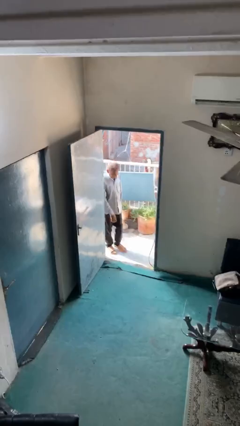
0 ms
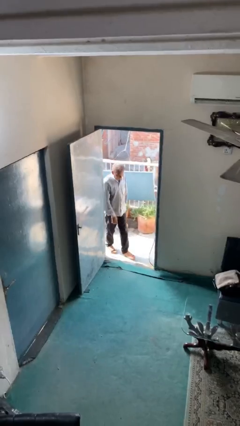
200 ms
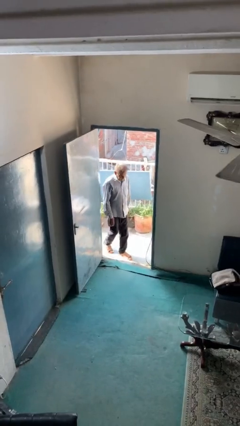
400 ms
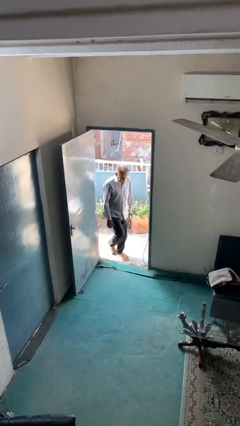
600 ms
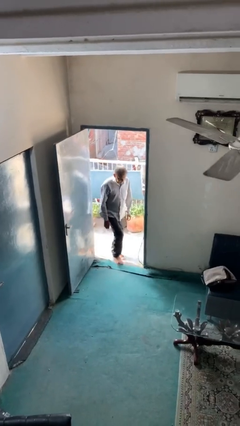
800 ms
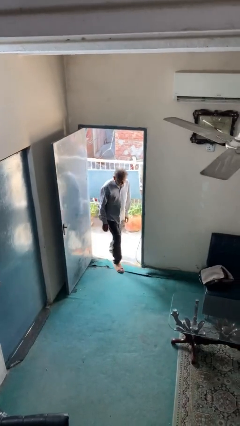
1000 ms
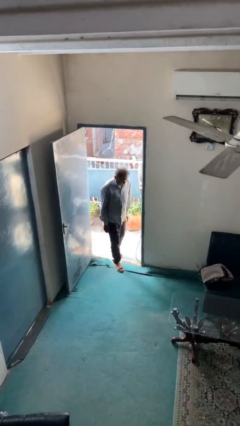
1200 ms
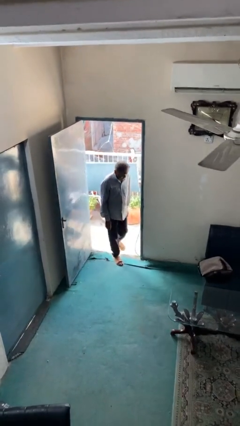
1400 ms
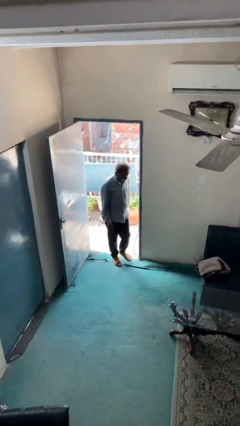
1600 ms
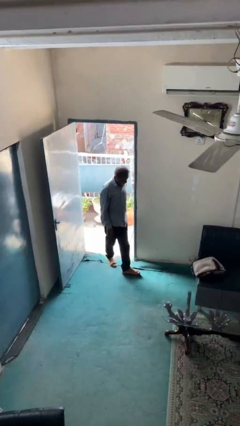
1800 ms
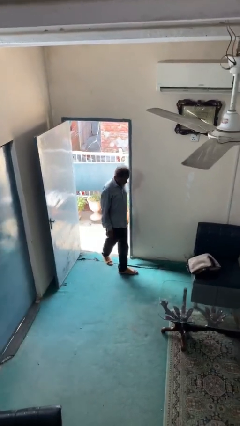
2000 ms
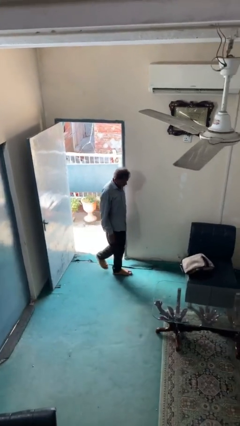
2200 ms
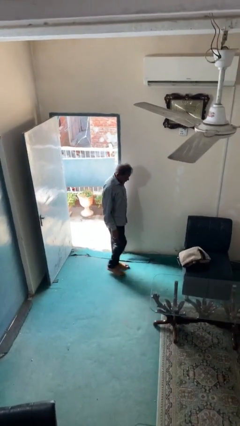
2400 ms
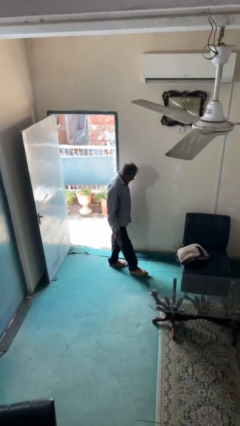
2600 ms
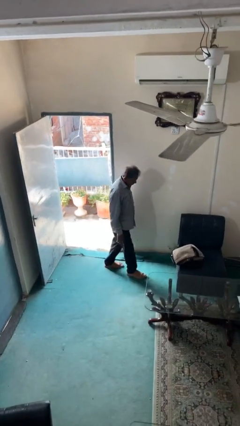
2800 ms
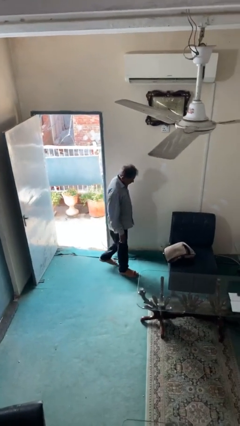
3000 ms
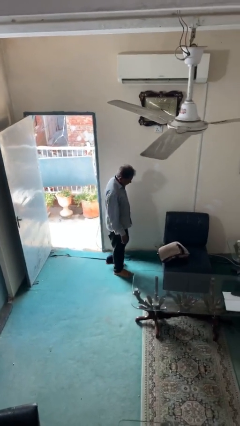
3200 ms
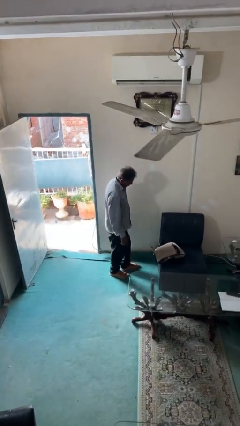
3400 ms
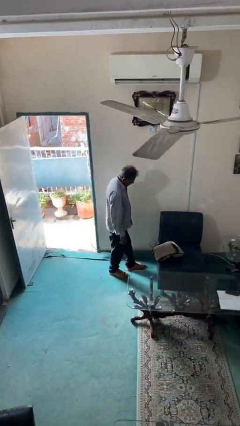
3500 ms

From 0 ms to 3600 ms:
person enters scene through structure

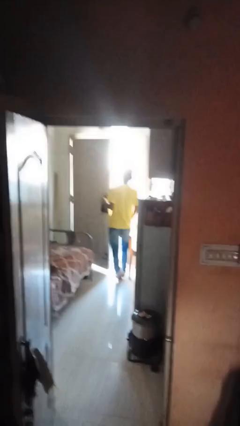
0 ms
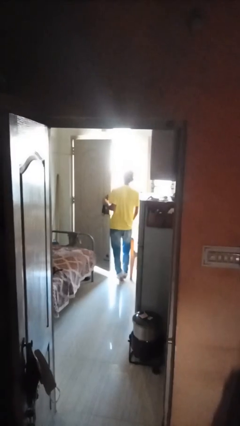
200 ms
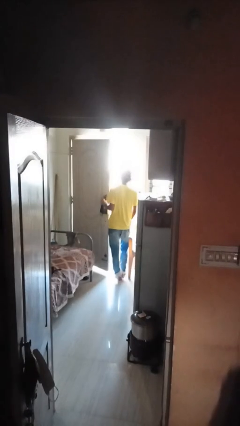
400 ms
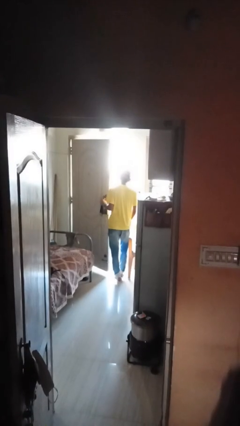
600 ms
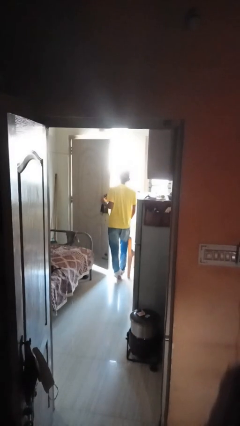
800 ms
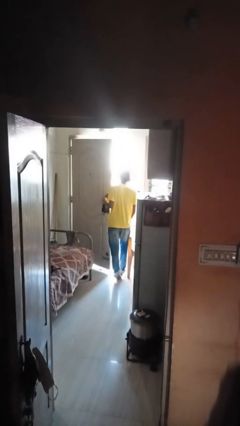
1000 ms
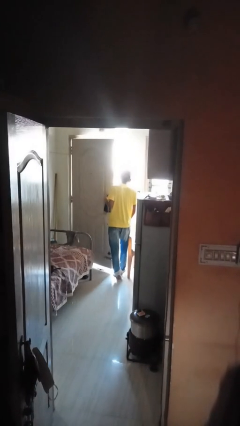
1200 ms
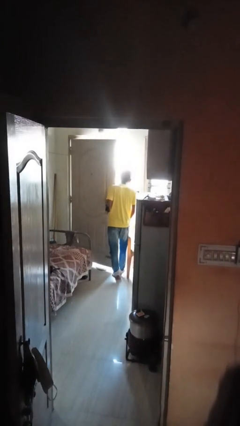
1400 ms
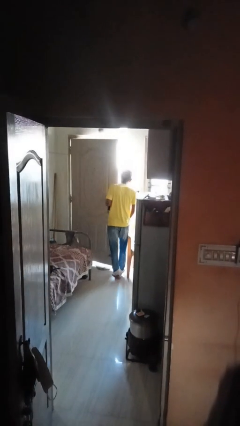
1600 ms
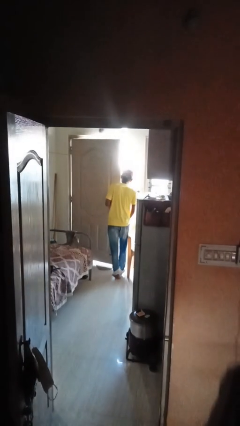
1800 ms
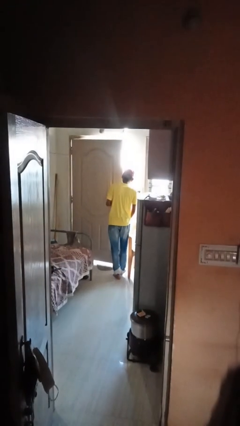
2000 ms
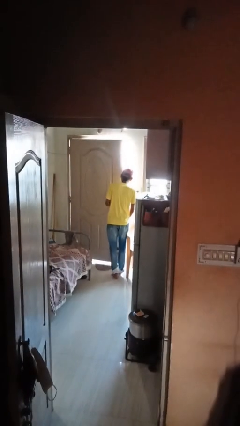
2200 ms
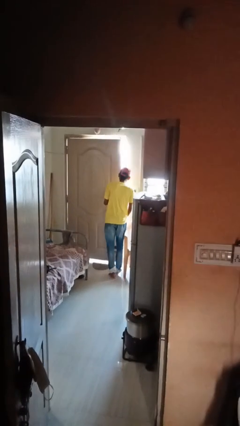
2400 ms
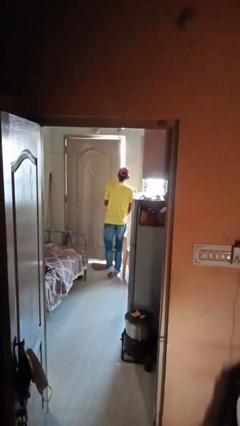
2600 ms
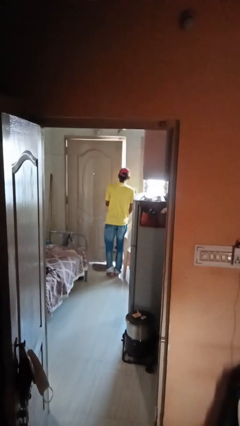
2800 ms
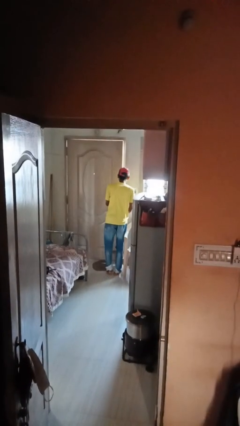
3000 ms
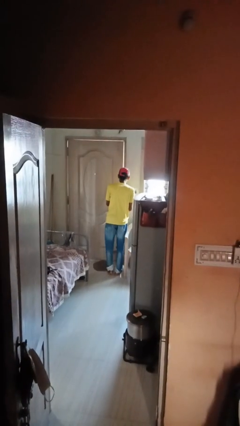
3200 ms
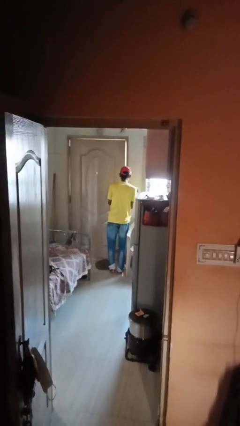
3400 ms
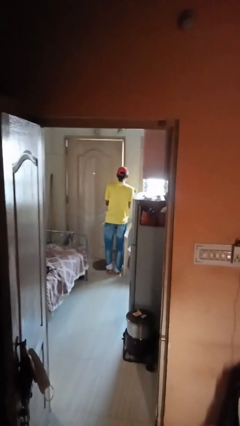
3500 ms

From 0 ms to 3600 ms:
person closes facility door

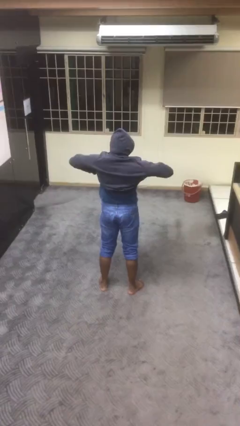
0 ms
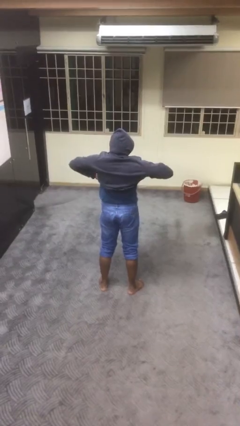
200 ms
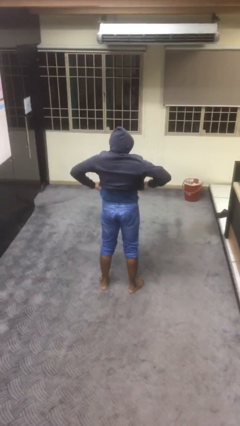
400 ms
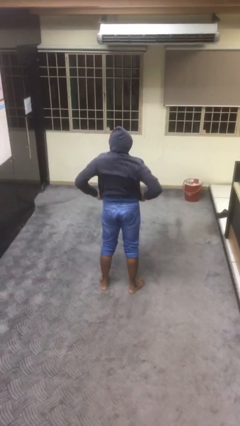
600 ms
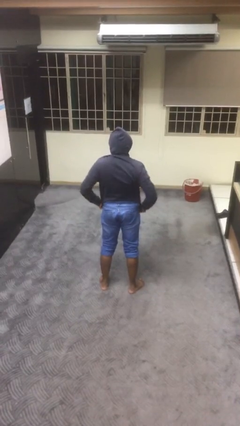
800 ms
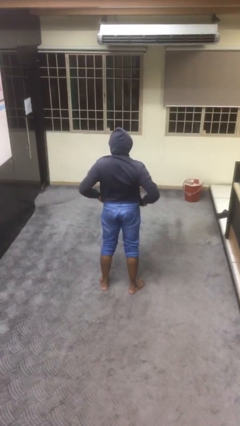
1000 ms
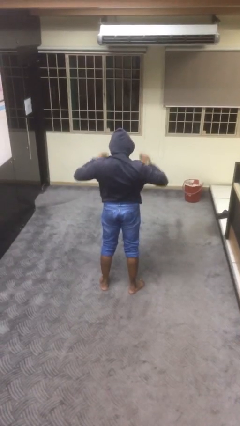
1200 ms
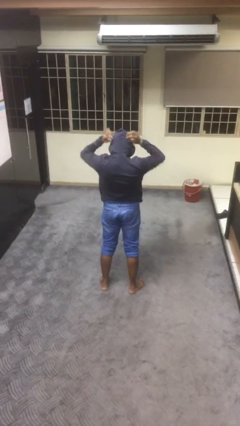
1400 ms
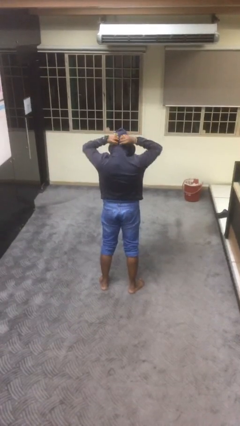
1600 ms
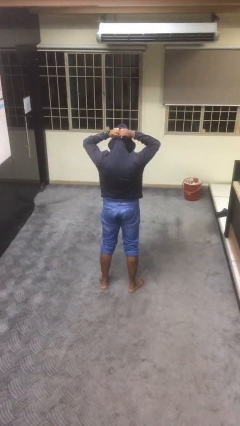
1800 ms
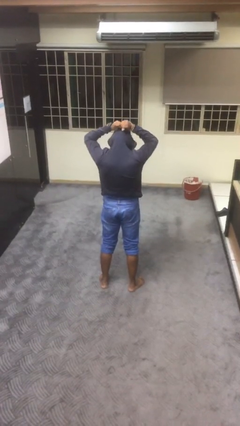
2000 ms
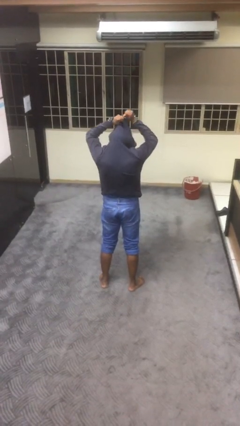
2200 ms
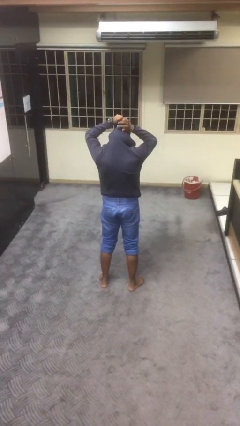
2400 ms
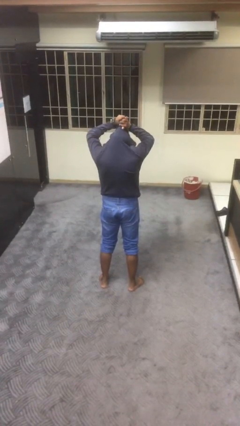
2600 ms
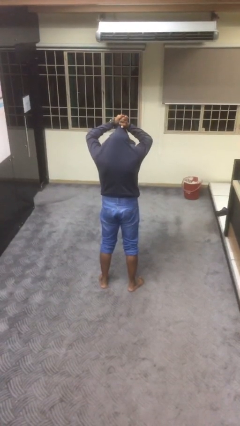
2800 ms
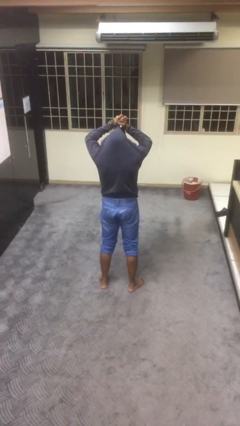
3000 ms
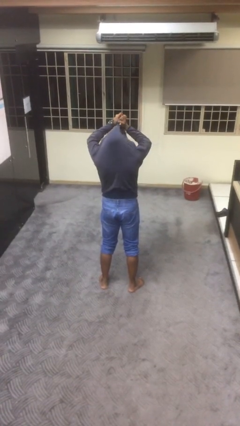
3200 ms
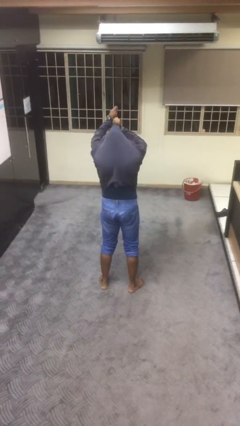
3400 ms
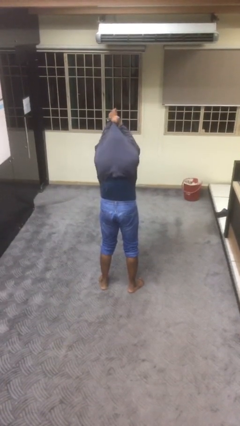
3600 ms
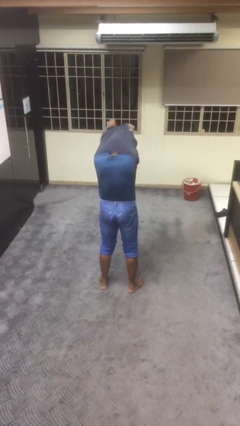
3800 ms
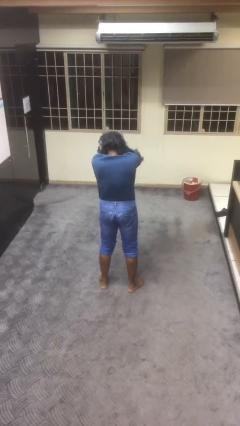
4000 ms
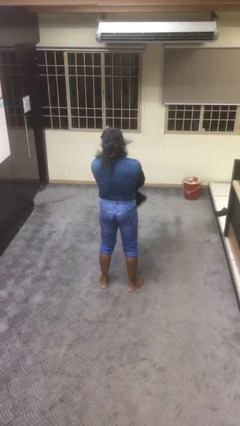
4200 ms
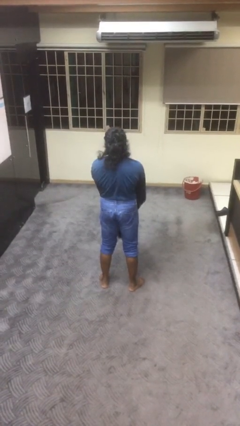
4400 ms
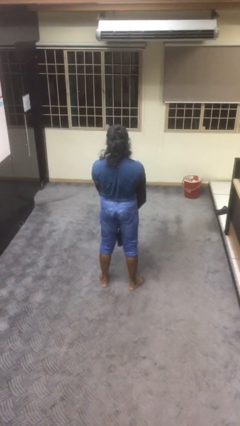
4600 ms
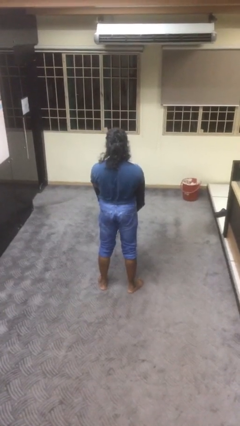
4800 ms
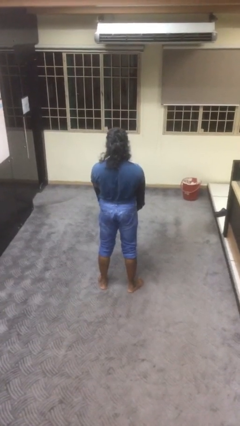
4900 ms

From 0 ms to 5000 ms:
person takes off hoodie

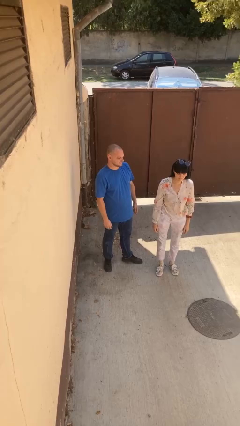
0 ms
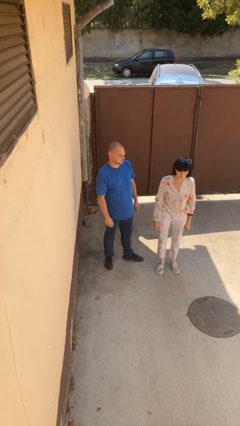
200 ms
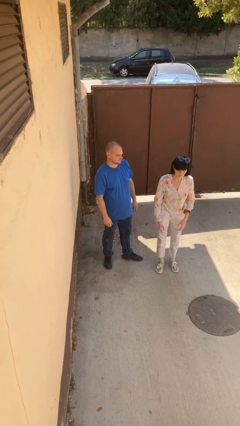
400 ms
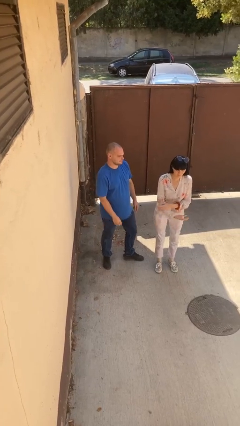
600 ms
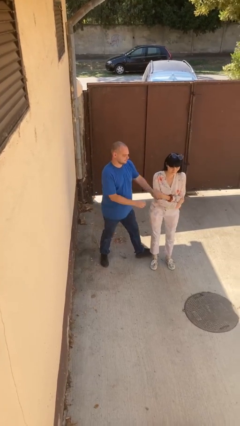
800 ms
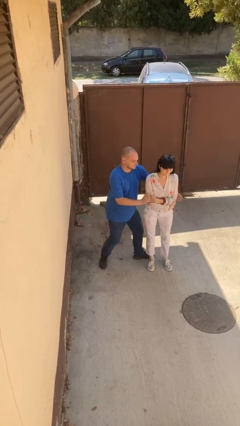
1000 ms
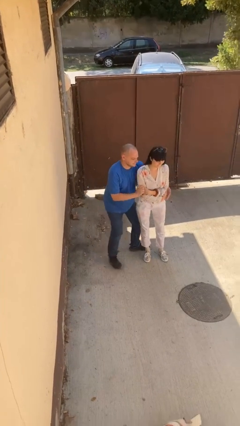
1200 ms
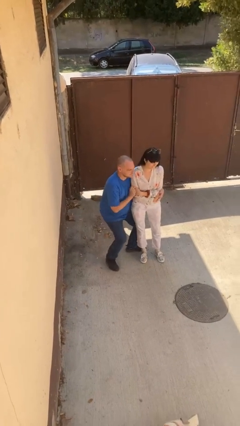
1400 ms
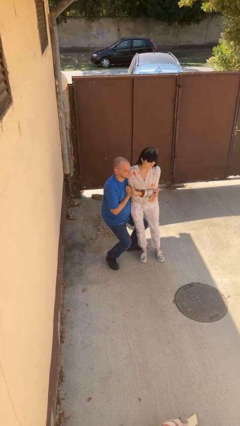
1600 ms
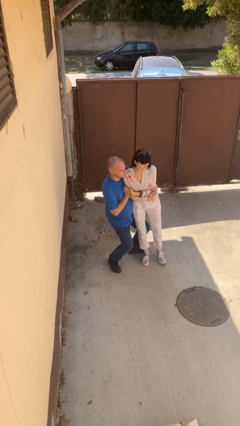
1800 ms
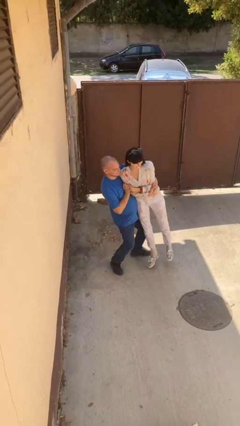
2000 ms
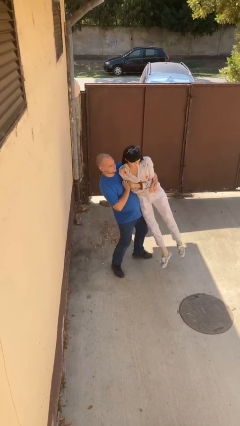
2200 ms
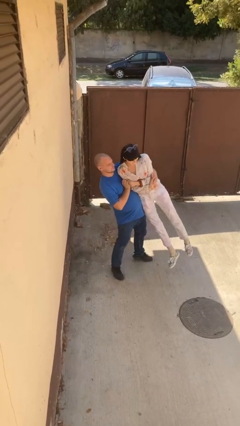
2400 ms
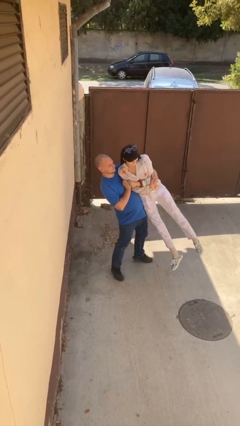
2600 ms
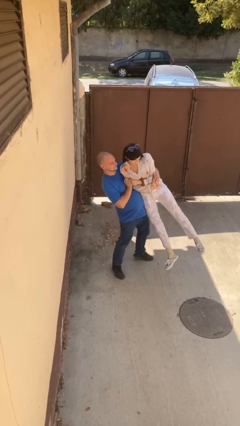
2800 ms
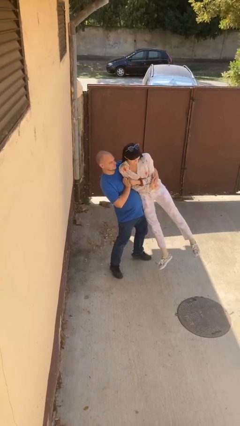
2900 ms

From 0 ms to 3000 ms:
person picks up person

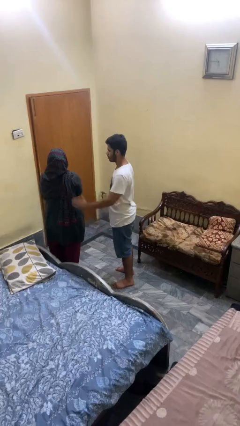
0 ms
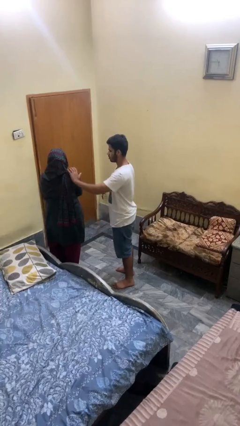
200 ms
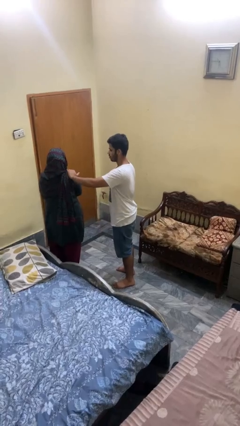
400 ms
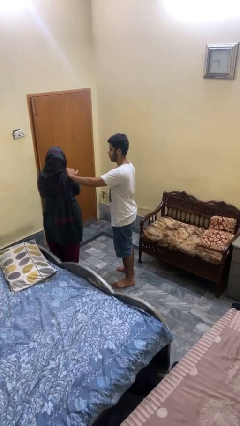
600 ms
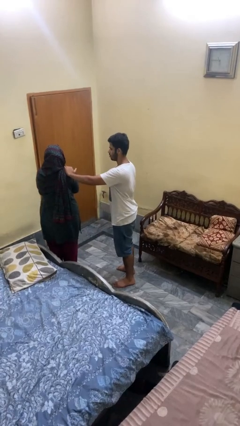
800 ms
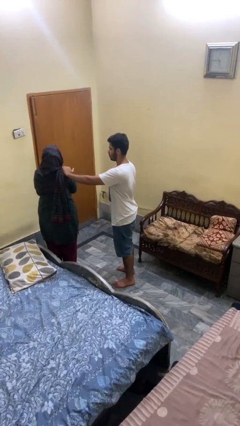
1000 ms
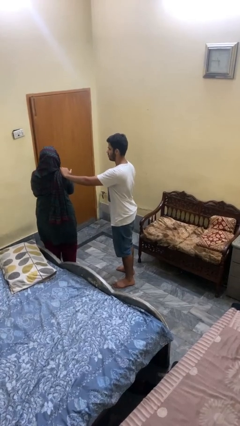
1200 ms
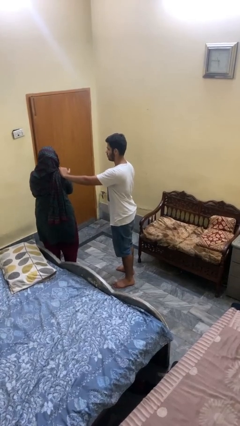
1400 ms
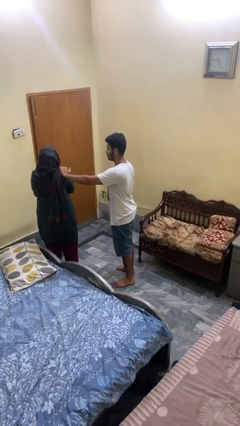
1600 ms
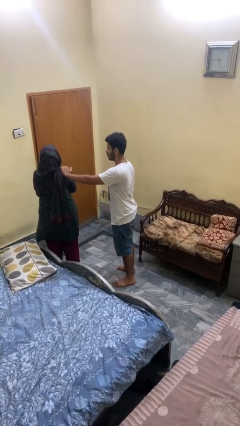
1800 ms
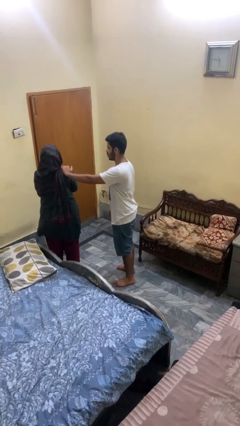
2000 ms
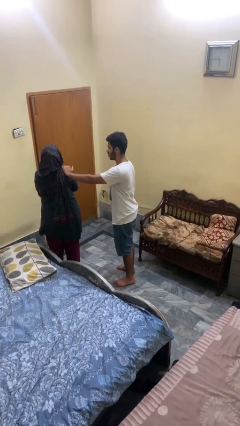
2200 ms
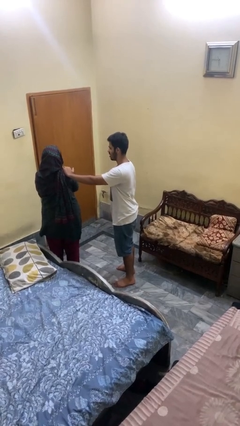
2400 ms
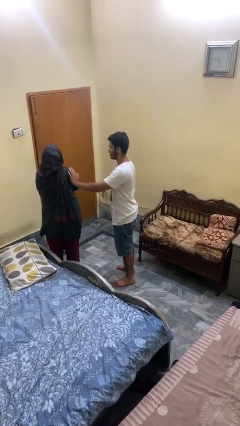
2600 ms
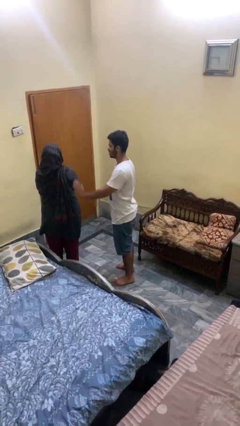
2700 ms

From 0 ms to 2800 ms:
person pounds shoulders of person
